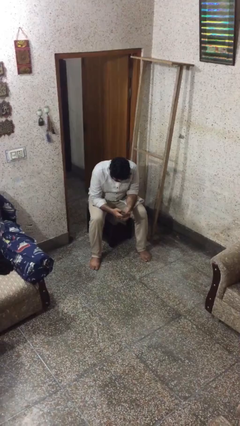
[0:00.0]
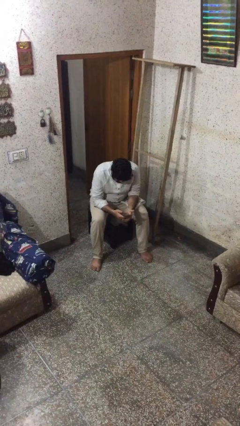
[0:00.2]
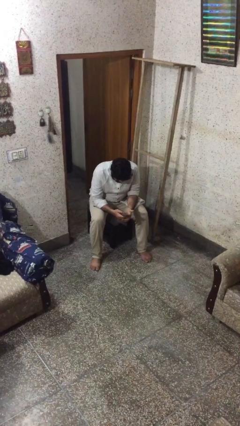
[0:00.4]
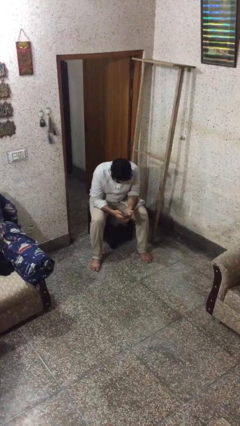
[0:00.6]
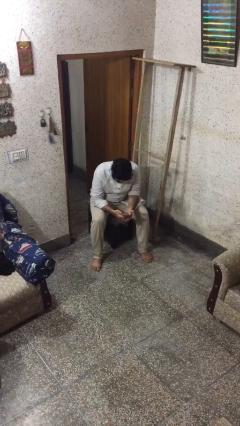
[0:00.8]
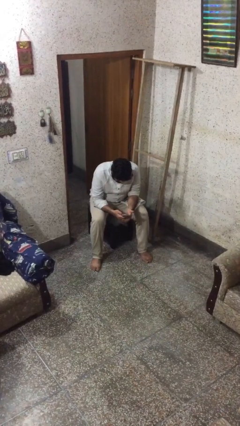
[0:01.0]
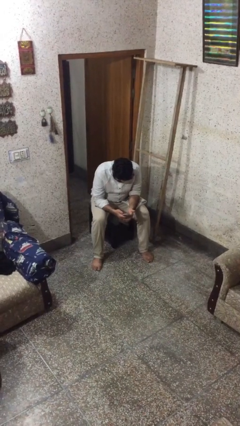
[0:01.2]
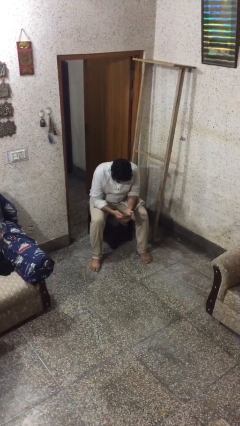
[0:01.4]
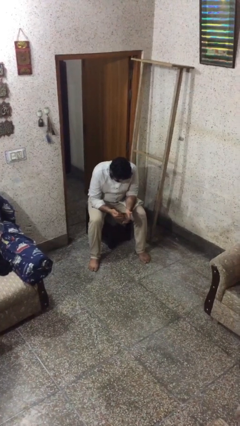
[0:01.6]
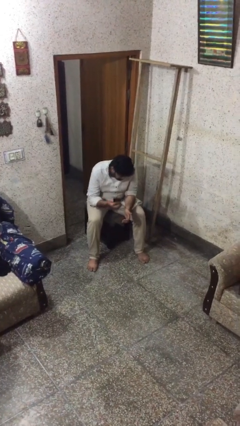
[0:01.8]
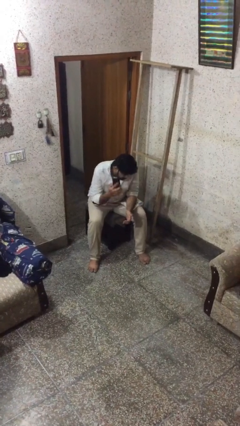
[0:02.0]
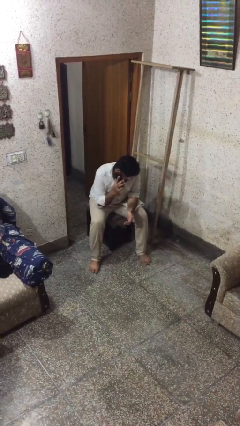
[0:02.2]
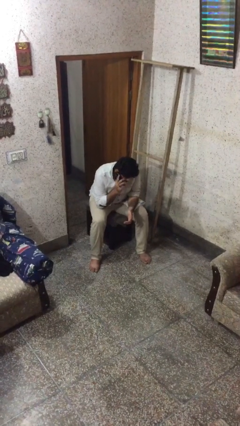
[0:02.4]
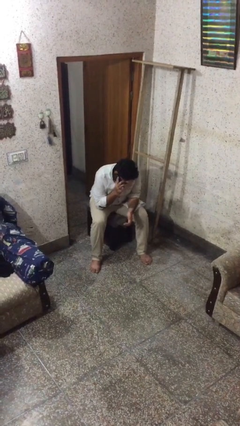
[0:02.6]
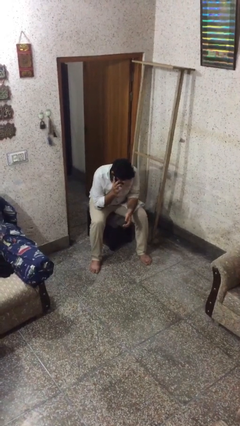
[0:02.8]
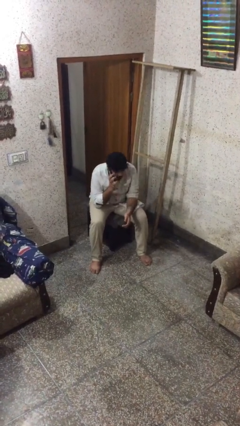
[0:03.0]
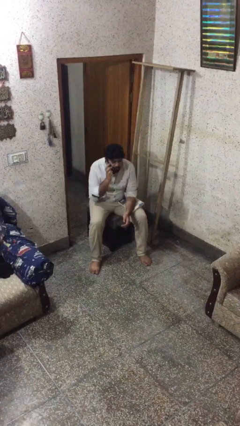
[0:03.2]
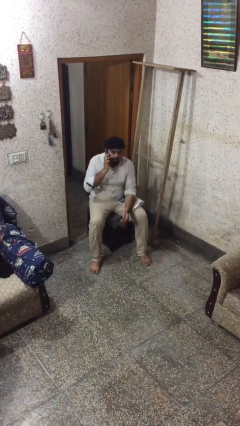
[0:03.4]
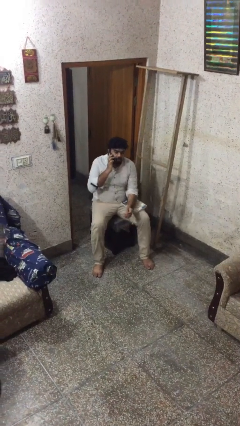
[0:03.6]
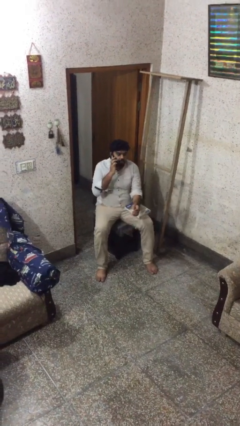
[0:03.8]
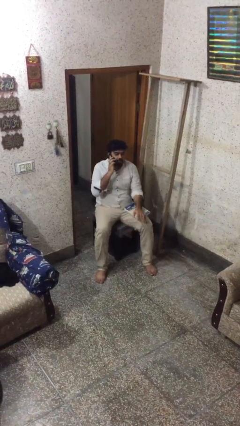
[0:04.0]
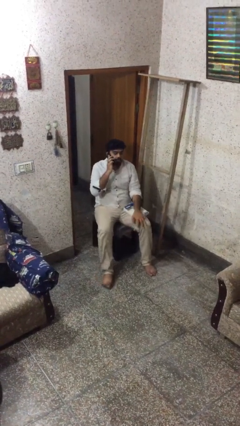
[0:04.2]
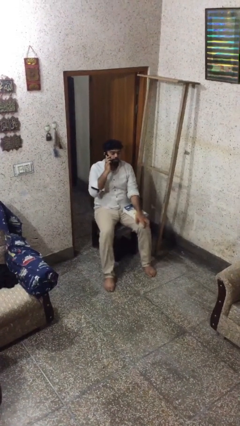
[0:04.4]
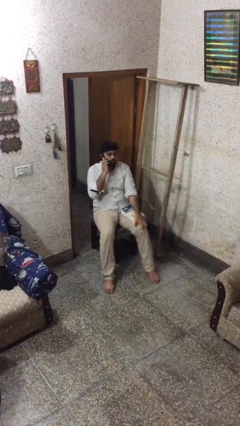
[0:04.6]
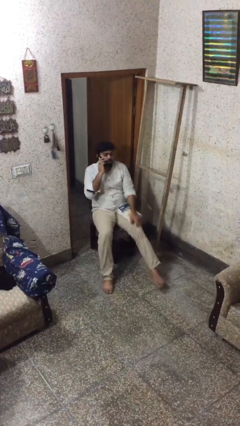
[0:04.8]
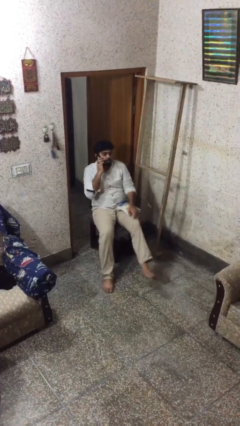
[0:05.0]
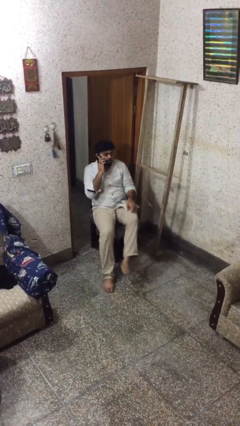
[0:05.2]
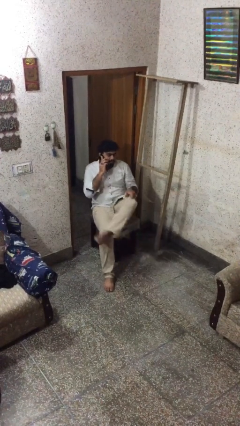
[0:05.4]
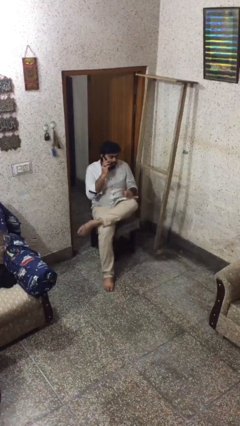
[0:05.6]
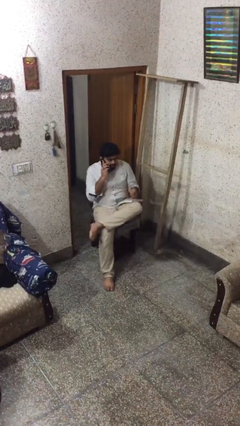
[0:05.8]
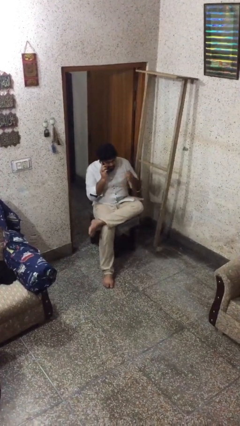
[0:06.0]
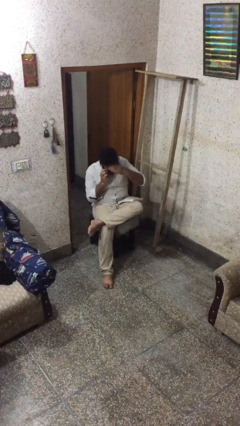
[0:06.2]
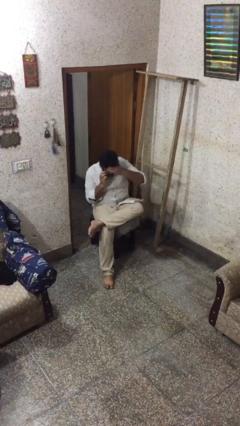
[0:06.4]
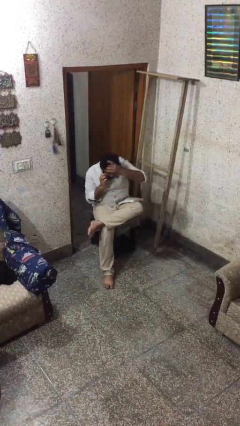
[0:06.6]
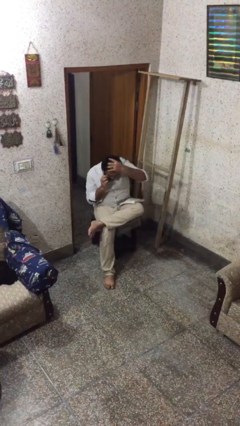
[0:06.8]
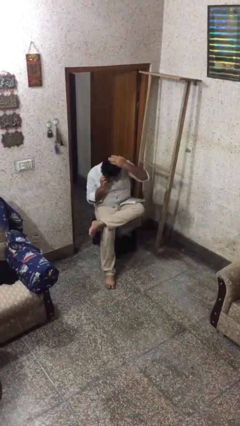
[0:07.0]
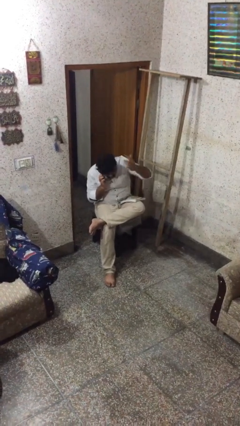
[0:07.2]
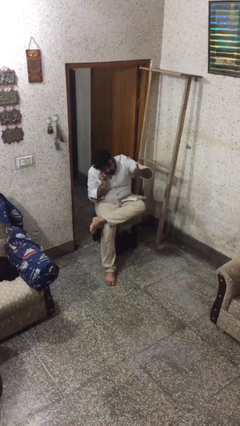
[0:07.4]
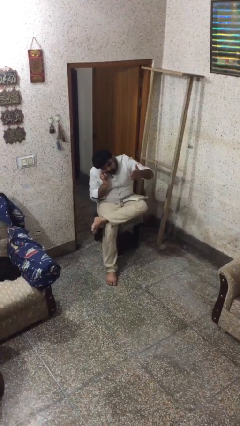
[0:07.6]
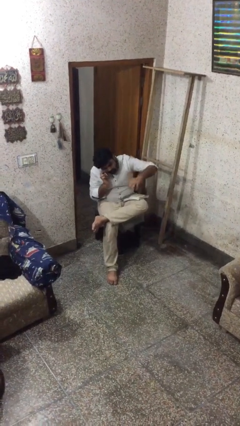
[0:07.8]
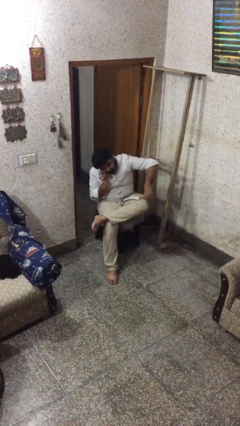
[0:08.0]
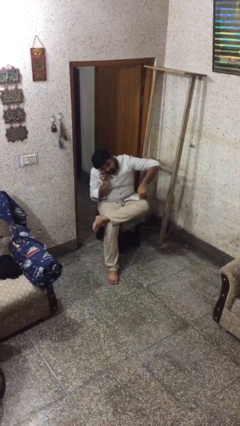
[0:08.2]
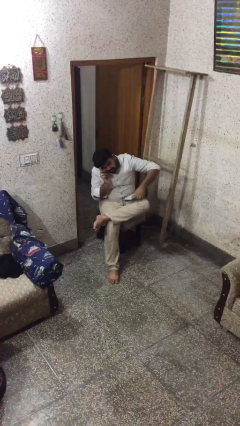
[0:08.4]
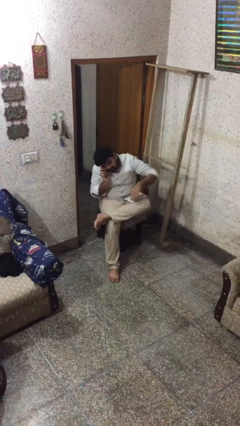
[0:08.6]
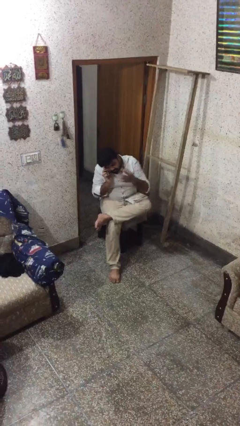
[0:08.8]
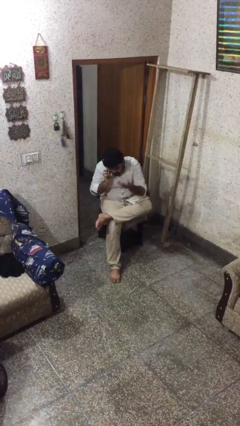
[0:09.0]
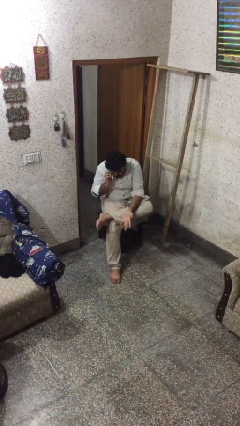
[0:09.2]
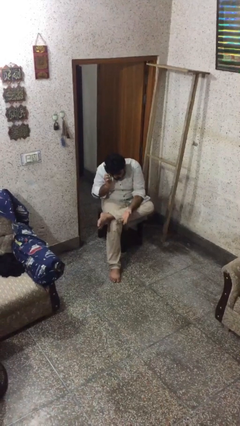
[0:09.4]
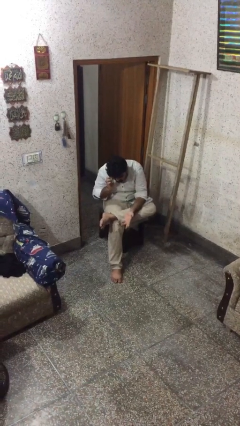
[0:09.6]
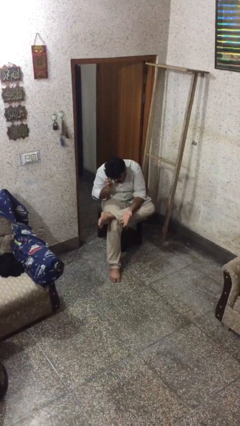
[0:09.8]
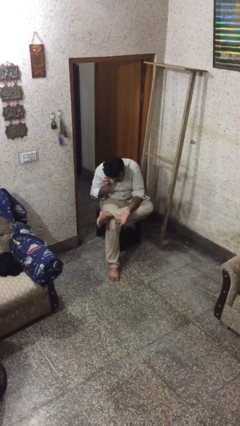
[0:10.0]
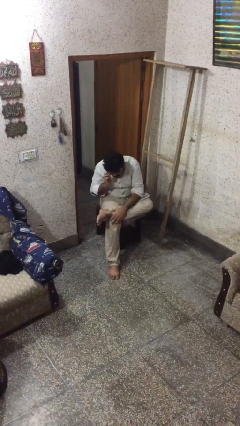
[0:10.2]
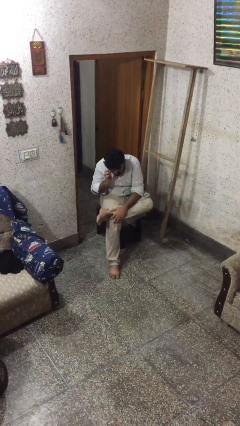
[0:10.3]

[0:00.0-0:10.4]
person talks on phone

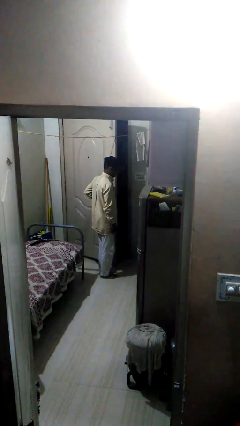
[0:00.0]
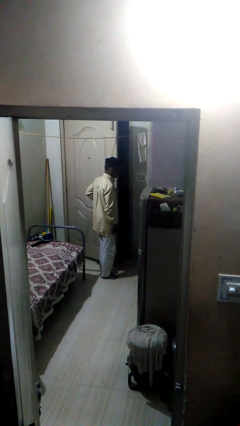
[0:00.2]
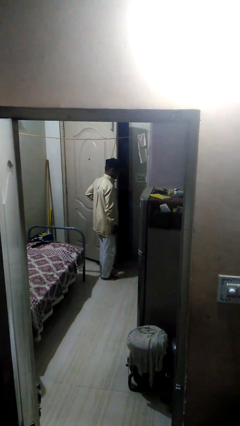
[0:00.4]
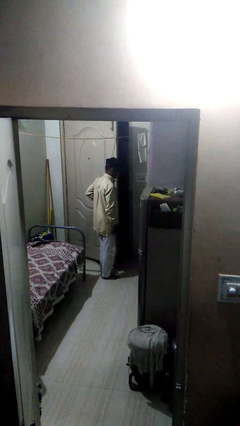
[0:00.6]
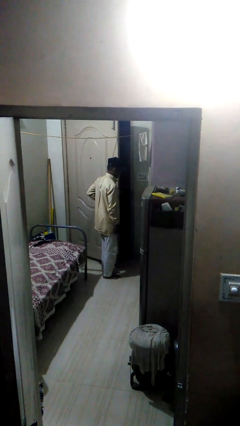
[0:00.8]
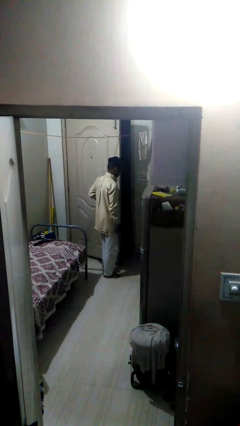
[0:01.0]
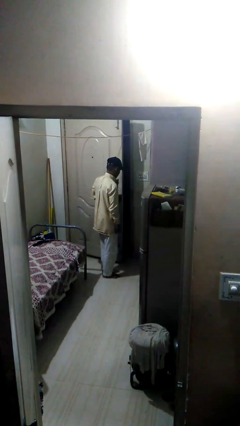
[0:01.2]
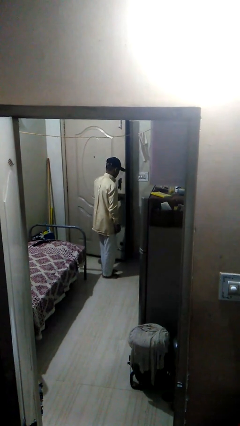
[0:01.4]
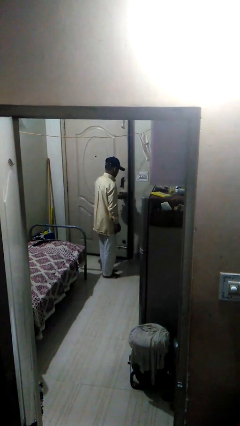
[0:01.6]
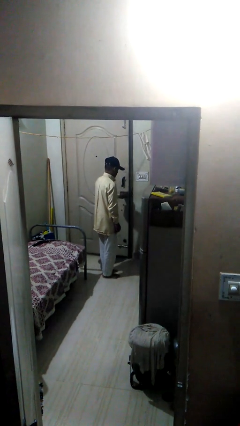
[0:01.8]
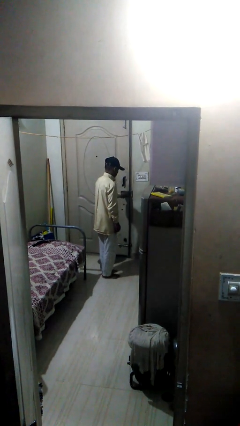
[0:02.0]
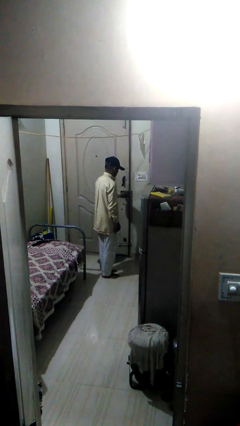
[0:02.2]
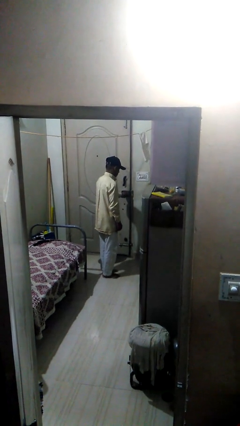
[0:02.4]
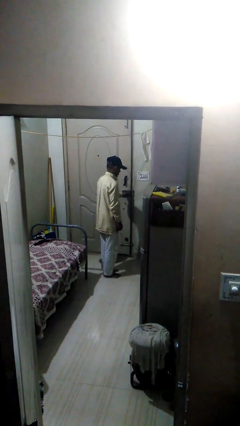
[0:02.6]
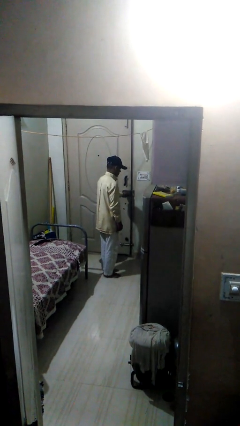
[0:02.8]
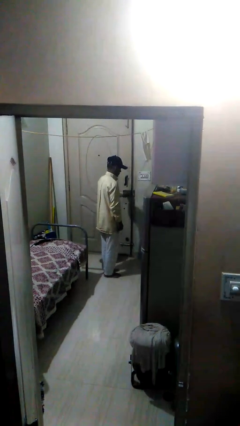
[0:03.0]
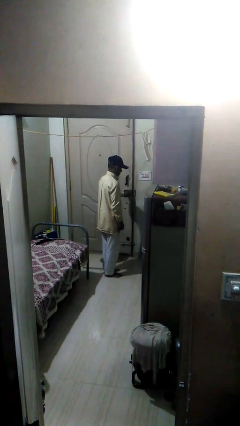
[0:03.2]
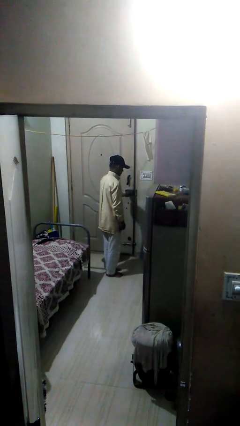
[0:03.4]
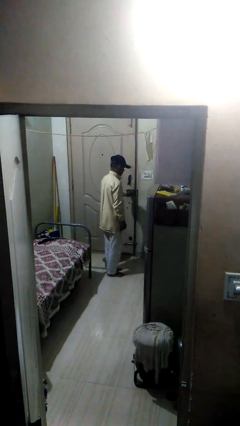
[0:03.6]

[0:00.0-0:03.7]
person closes facility door

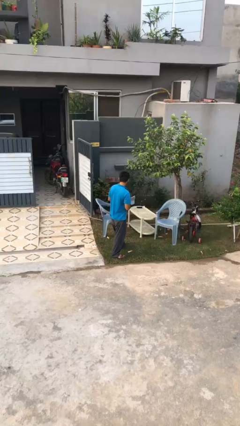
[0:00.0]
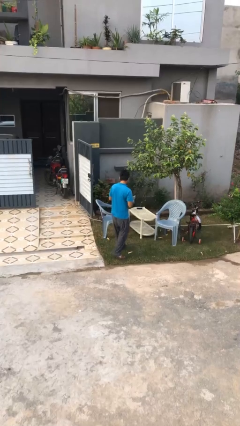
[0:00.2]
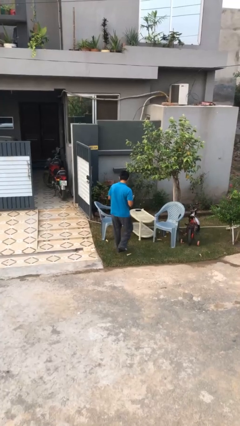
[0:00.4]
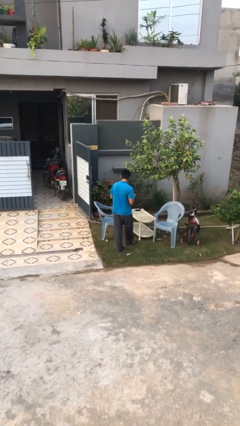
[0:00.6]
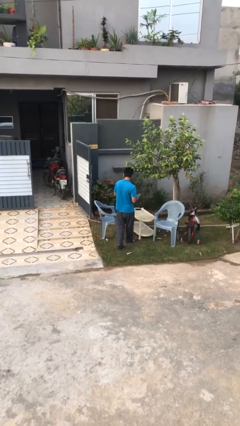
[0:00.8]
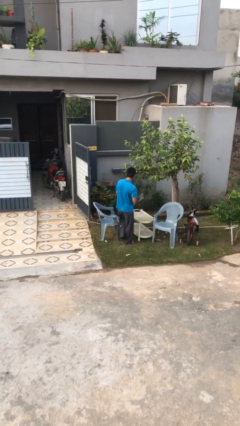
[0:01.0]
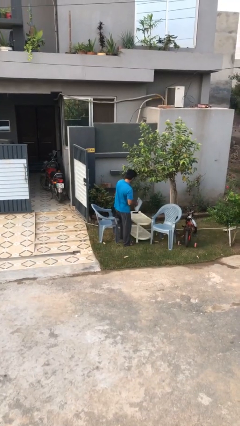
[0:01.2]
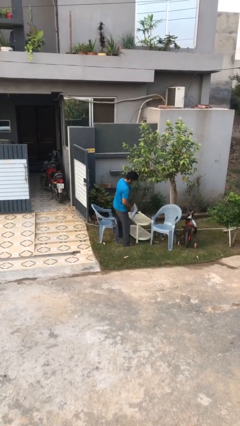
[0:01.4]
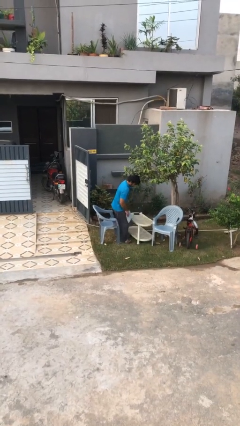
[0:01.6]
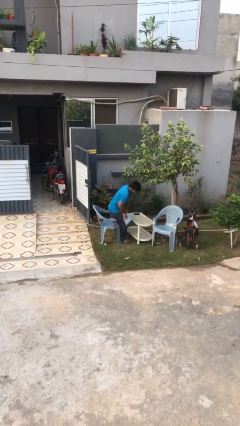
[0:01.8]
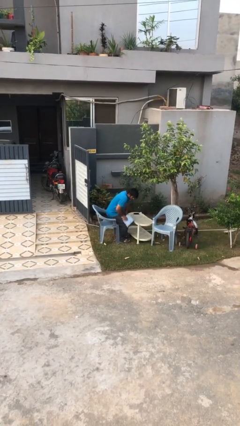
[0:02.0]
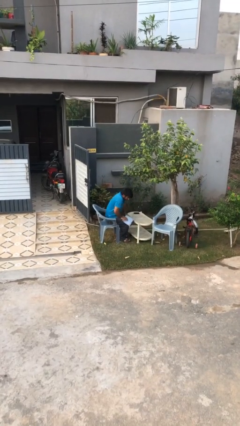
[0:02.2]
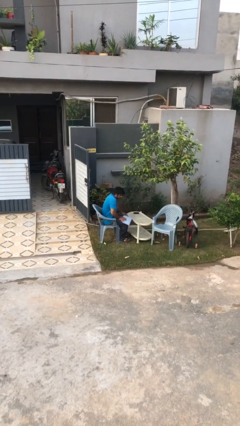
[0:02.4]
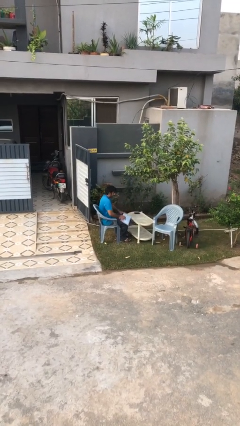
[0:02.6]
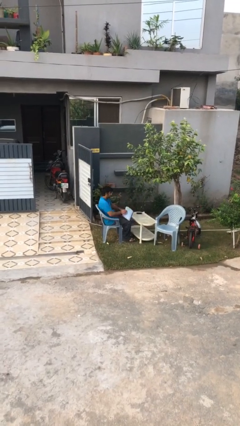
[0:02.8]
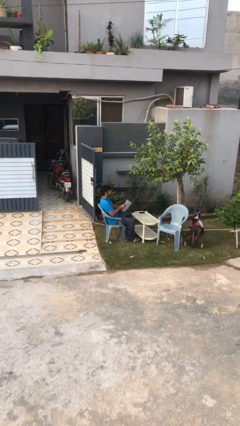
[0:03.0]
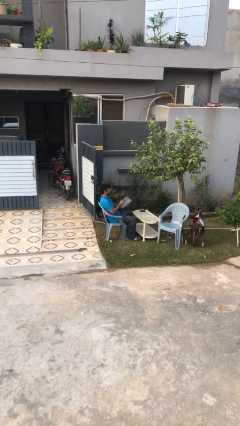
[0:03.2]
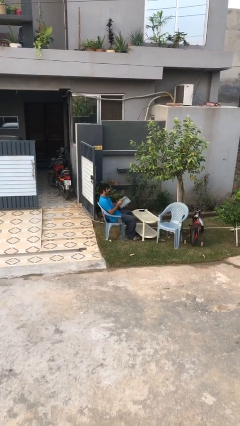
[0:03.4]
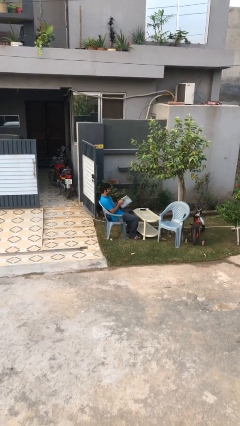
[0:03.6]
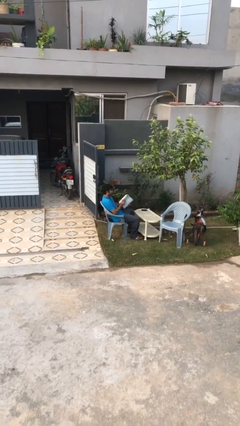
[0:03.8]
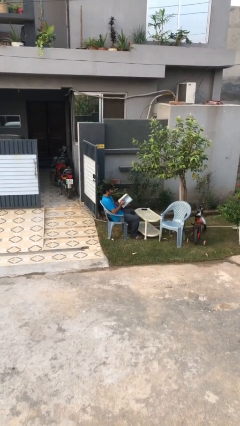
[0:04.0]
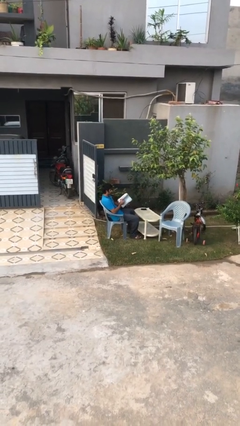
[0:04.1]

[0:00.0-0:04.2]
person sits down
